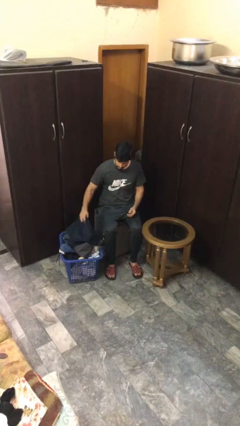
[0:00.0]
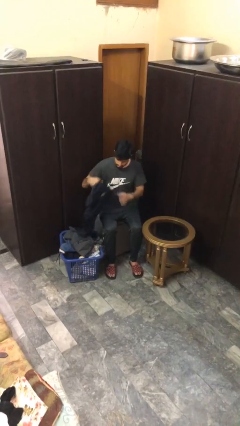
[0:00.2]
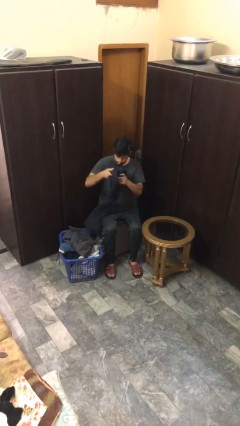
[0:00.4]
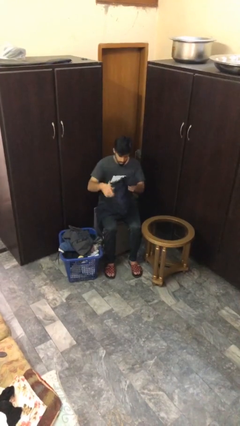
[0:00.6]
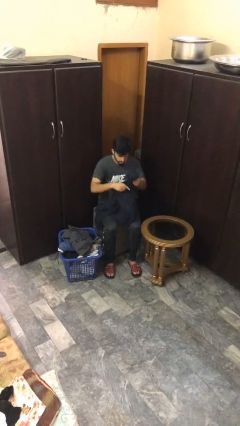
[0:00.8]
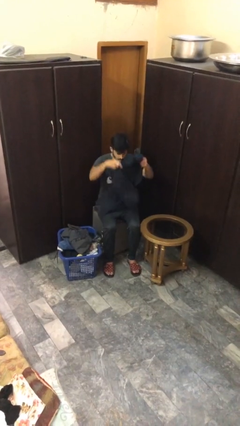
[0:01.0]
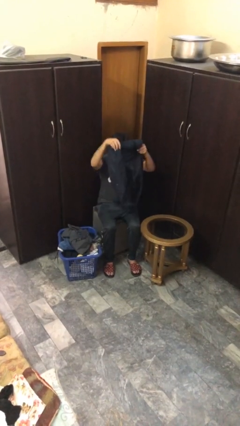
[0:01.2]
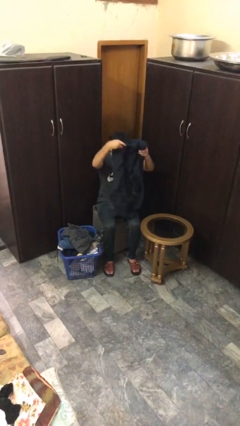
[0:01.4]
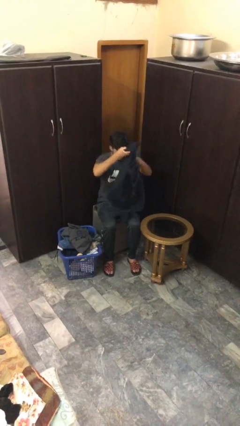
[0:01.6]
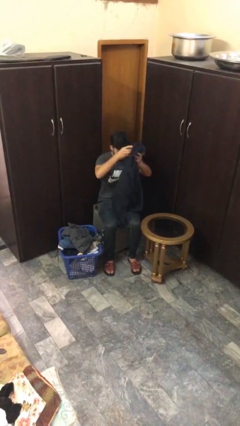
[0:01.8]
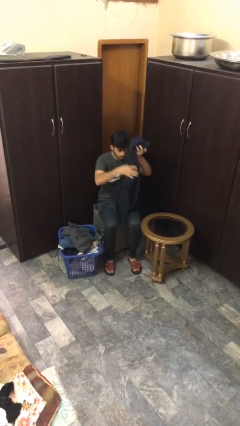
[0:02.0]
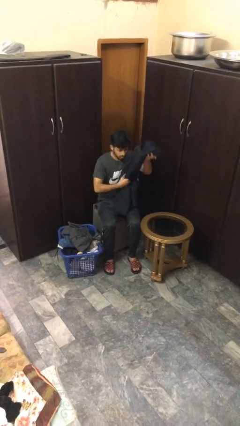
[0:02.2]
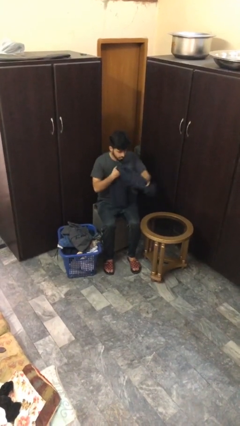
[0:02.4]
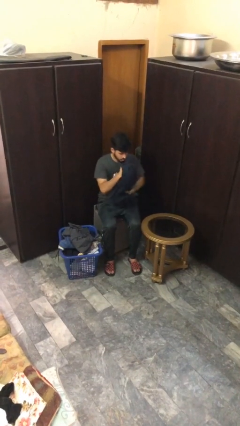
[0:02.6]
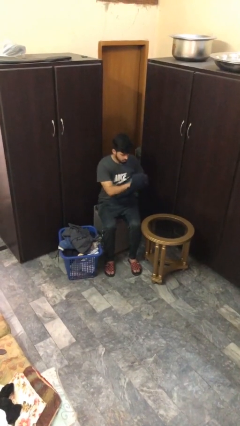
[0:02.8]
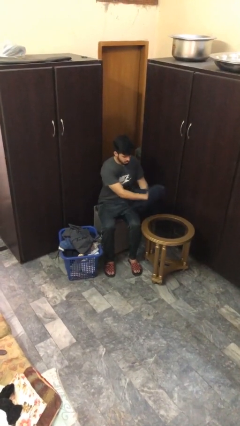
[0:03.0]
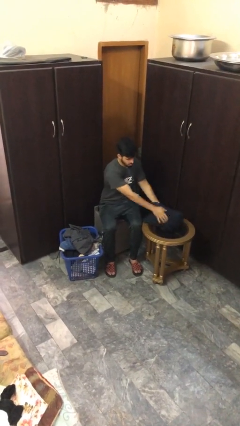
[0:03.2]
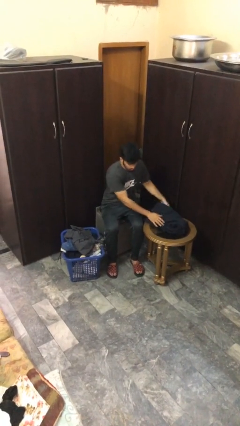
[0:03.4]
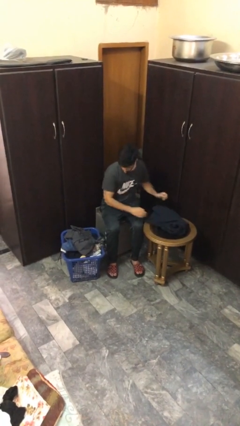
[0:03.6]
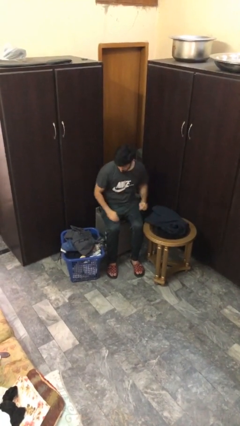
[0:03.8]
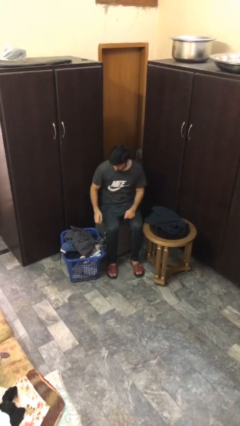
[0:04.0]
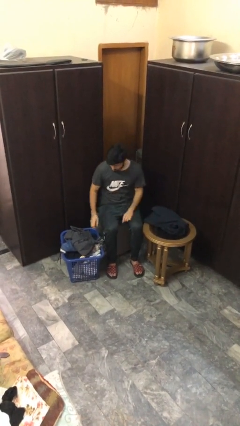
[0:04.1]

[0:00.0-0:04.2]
person folds pants

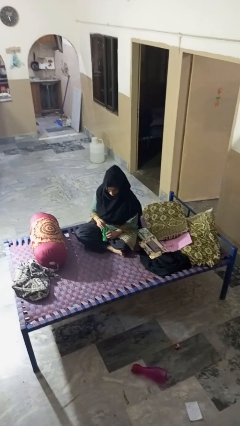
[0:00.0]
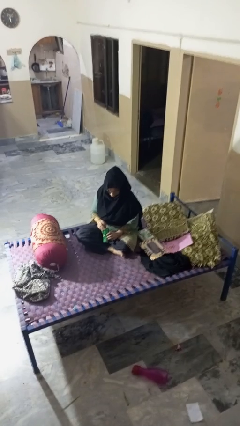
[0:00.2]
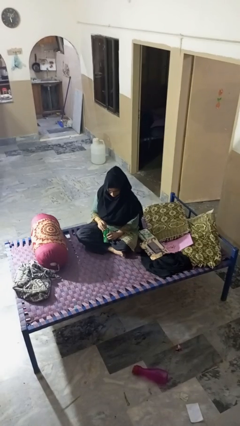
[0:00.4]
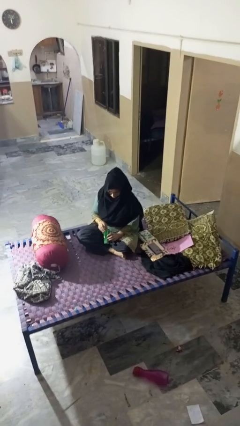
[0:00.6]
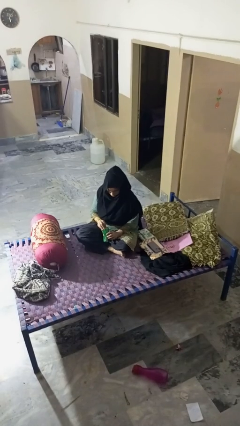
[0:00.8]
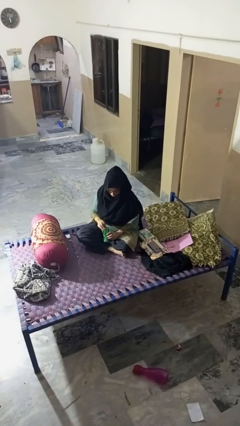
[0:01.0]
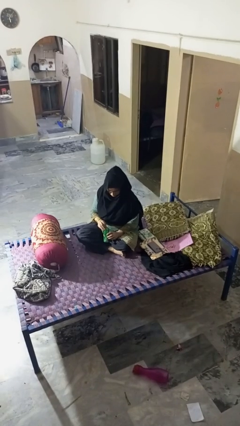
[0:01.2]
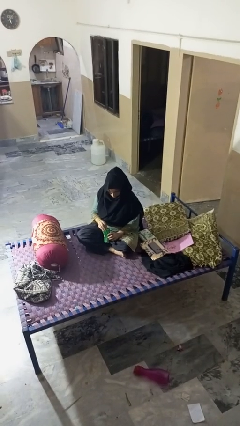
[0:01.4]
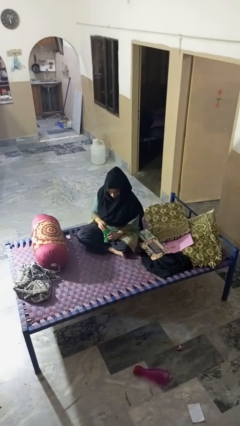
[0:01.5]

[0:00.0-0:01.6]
person opens can with can opener

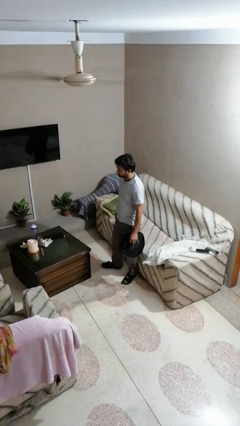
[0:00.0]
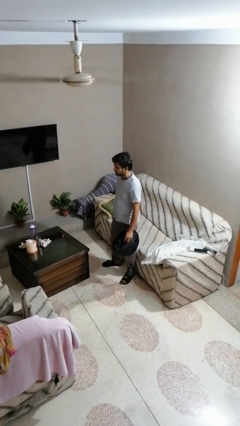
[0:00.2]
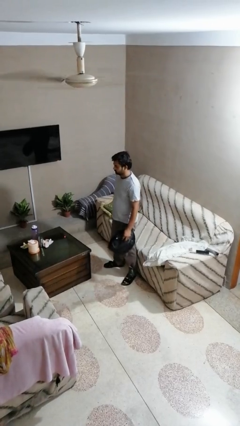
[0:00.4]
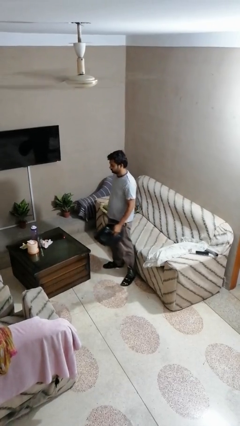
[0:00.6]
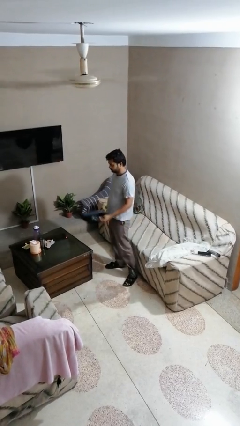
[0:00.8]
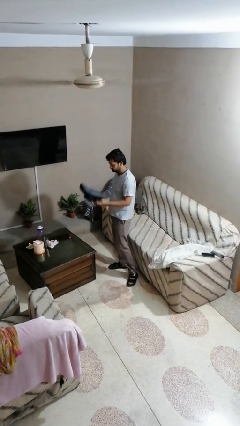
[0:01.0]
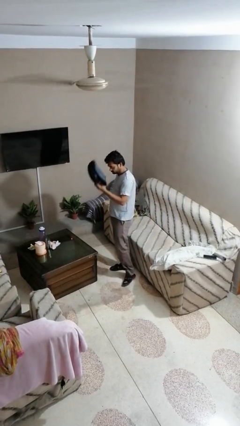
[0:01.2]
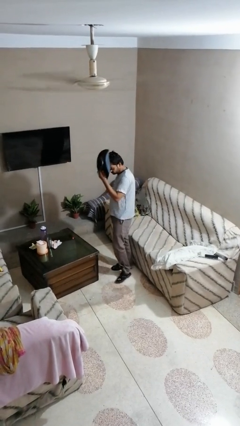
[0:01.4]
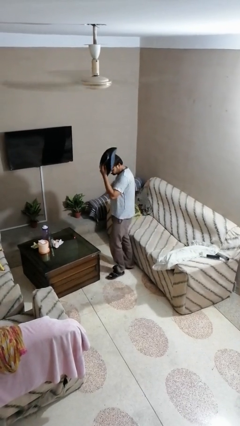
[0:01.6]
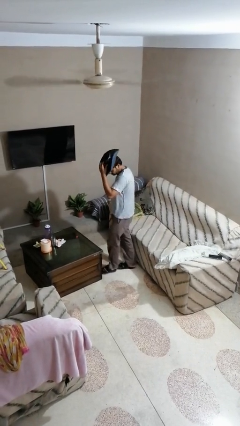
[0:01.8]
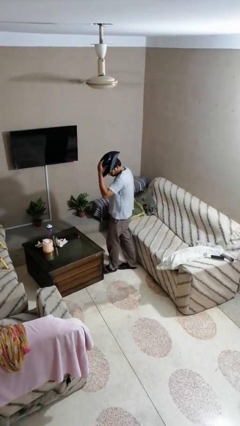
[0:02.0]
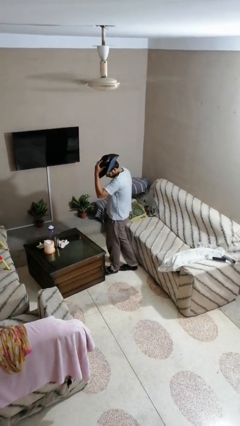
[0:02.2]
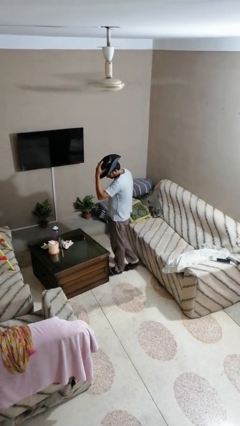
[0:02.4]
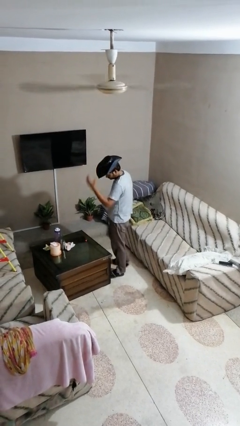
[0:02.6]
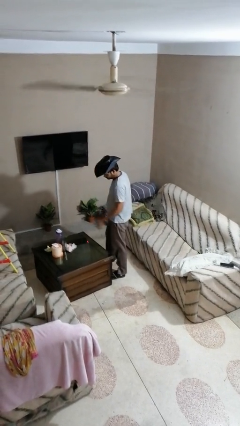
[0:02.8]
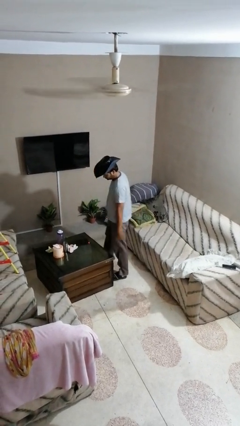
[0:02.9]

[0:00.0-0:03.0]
person puts on hat

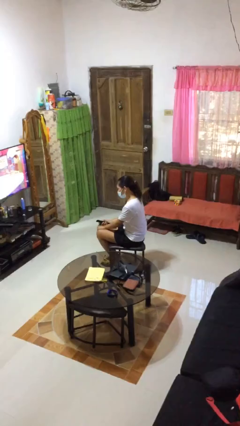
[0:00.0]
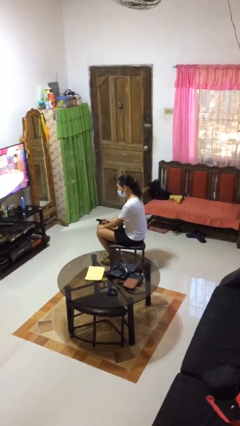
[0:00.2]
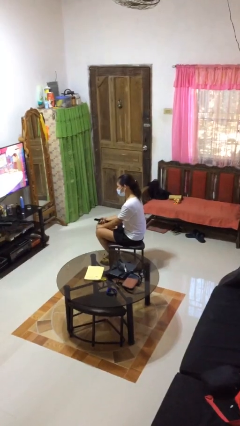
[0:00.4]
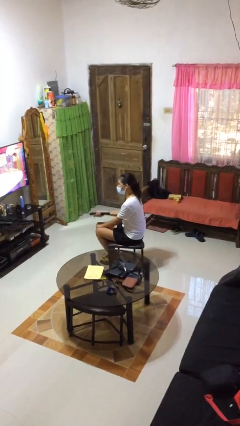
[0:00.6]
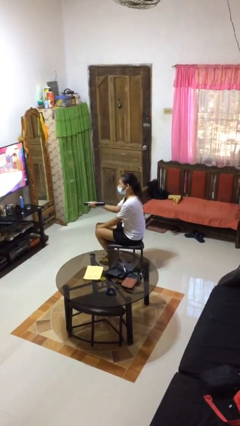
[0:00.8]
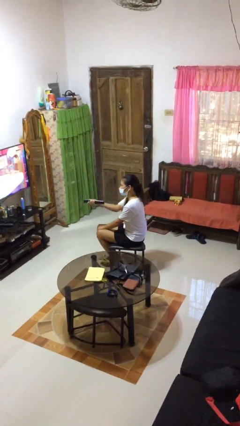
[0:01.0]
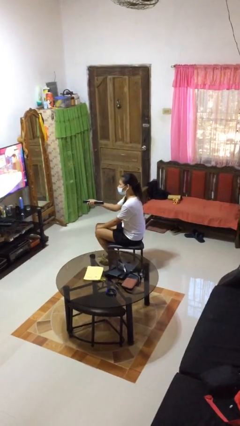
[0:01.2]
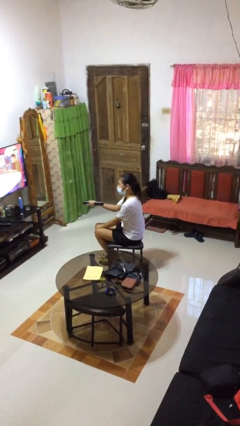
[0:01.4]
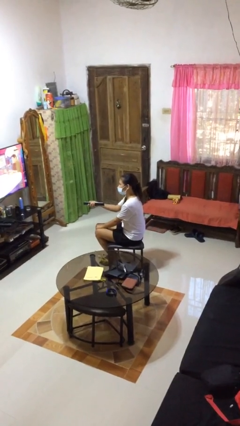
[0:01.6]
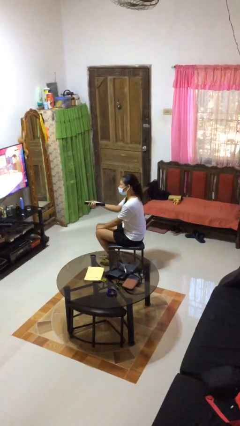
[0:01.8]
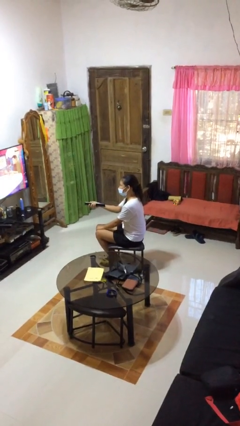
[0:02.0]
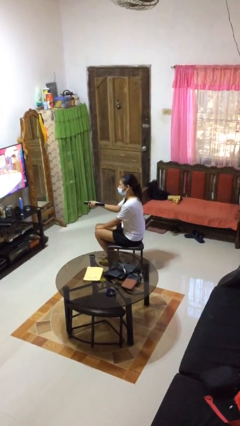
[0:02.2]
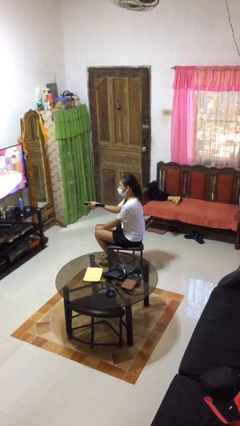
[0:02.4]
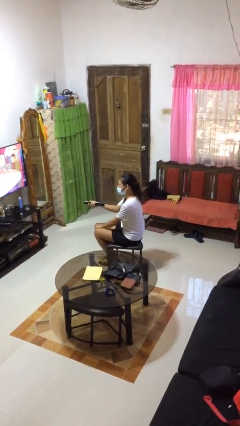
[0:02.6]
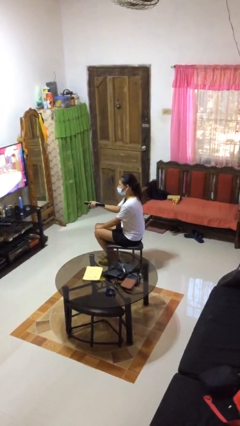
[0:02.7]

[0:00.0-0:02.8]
person uses television remote

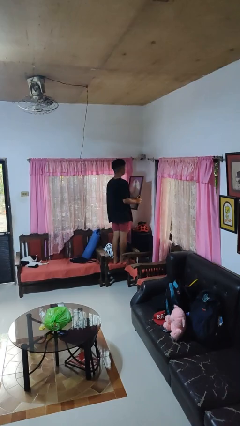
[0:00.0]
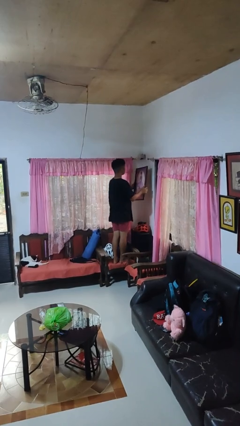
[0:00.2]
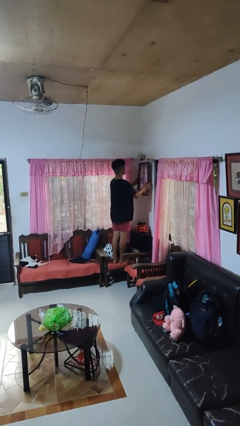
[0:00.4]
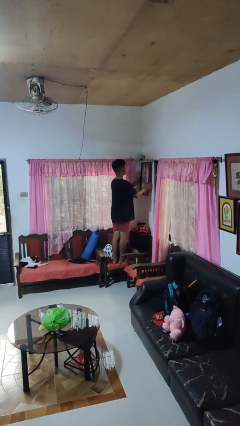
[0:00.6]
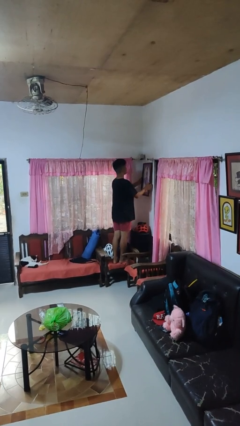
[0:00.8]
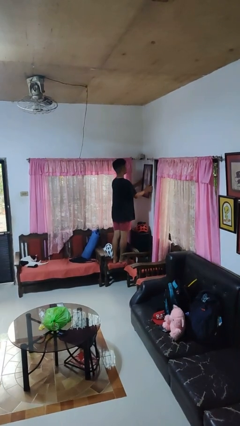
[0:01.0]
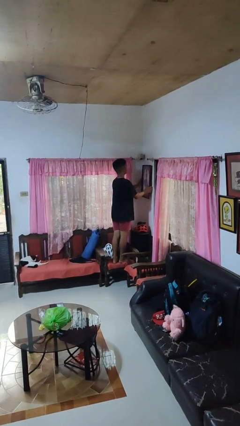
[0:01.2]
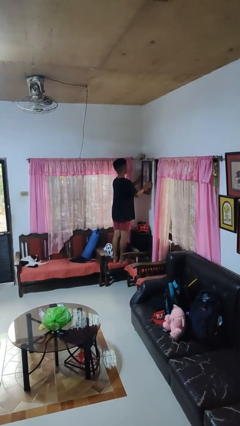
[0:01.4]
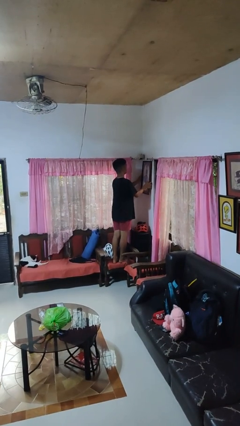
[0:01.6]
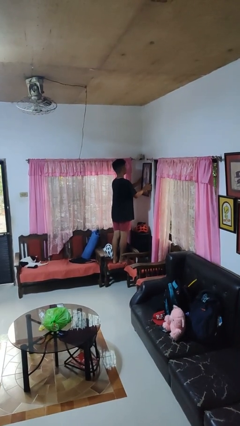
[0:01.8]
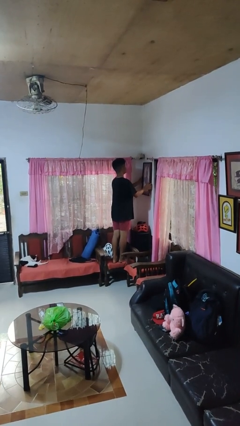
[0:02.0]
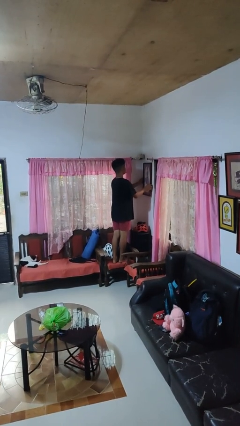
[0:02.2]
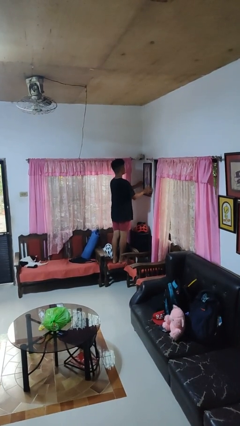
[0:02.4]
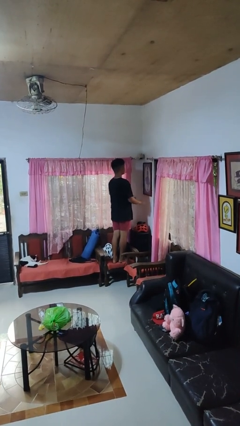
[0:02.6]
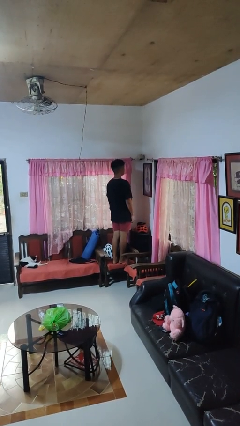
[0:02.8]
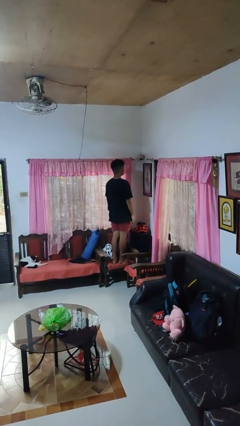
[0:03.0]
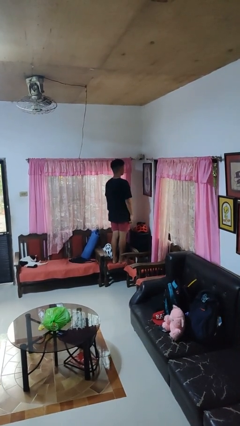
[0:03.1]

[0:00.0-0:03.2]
person puts up picture frame

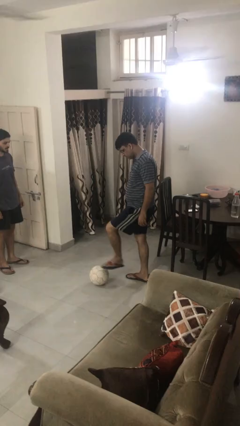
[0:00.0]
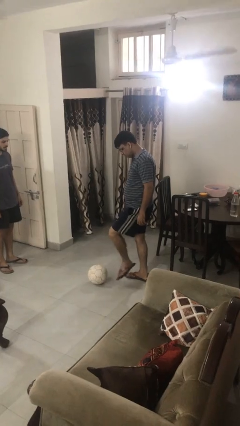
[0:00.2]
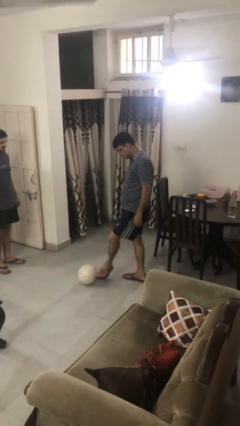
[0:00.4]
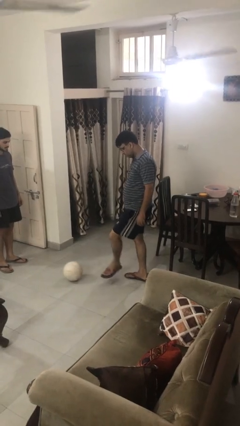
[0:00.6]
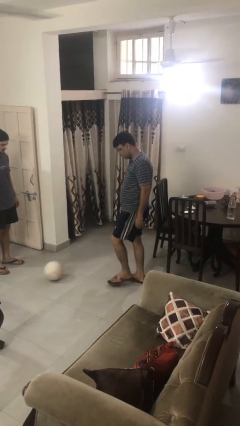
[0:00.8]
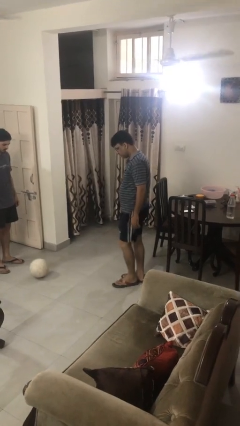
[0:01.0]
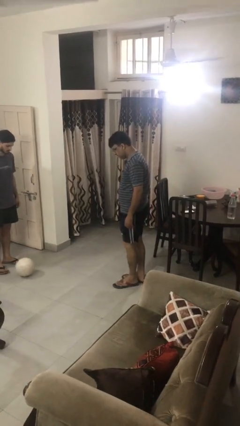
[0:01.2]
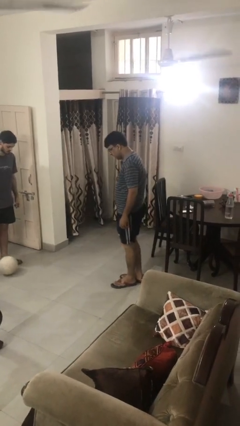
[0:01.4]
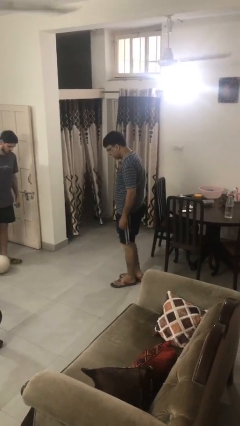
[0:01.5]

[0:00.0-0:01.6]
person kicks object to person

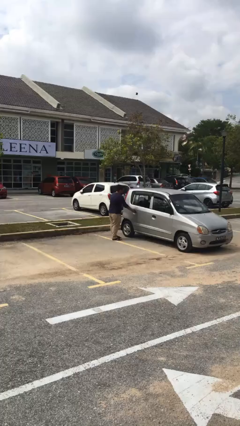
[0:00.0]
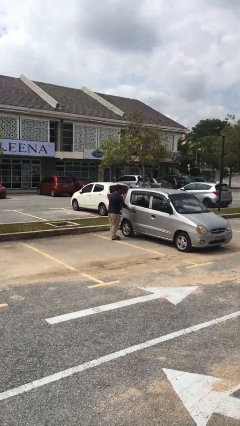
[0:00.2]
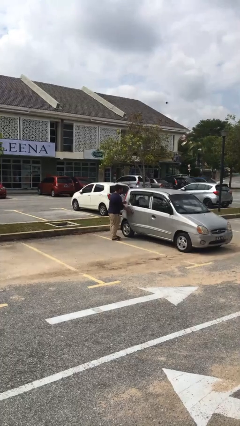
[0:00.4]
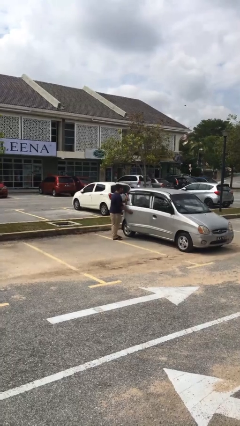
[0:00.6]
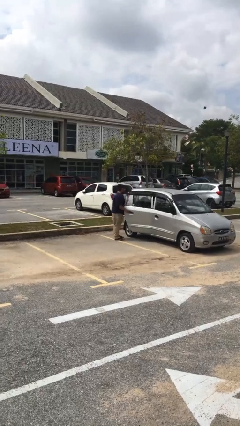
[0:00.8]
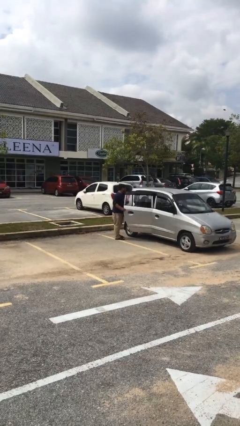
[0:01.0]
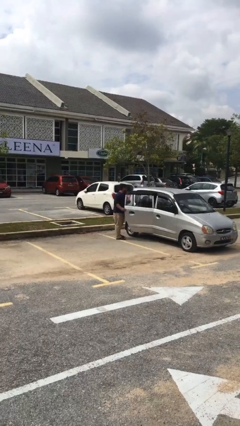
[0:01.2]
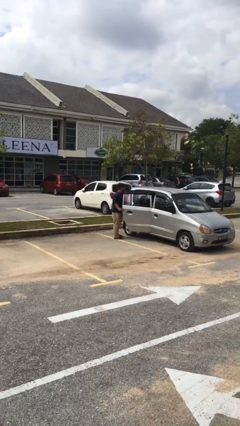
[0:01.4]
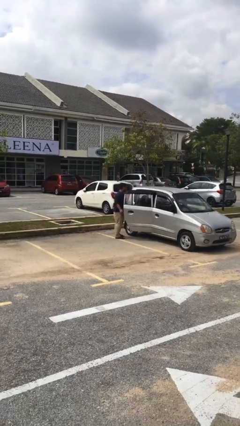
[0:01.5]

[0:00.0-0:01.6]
person opens car door
